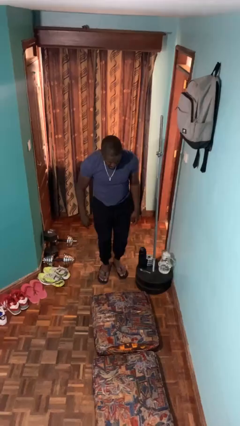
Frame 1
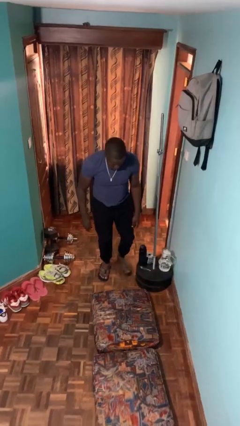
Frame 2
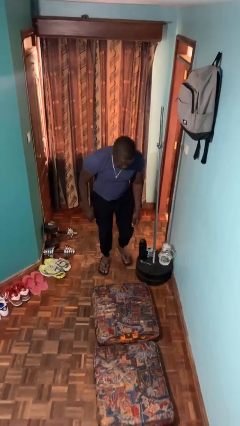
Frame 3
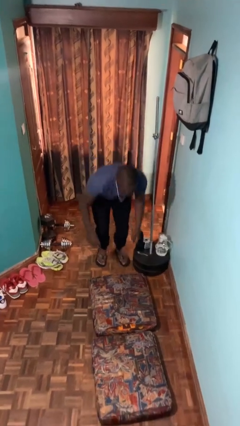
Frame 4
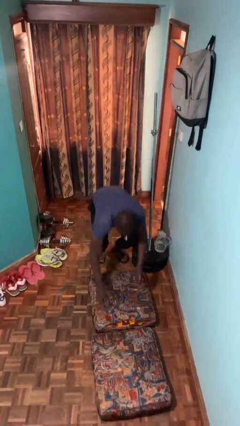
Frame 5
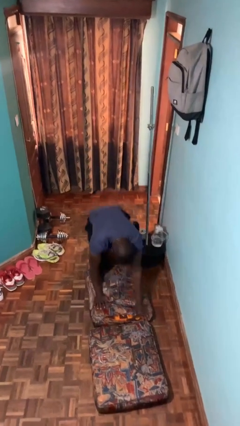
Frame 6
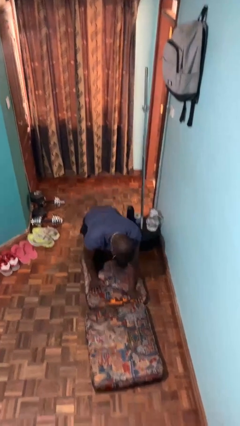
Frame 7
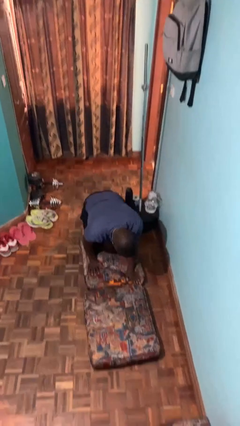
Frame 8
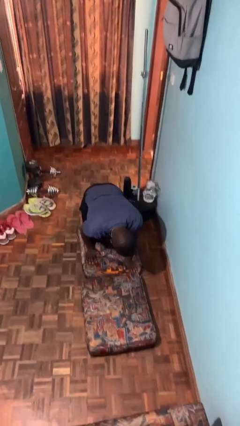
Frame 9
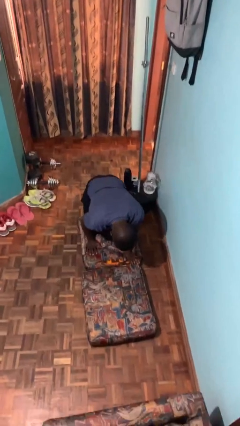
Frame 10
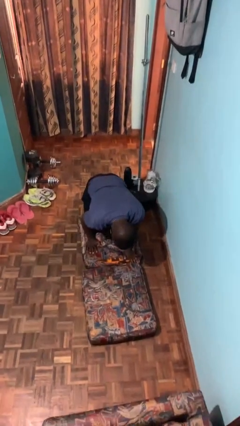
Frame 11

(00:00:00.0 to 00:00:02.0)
person trips on object on floor

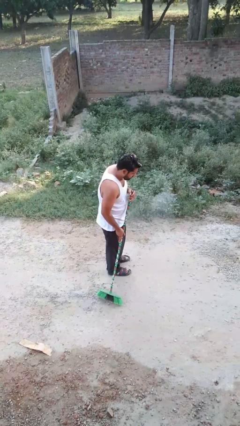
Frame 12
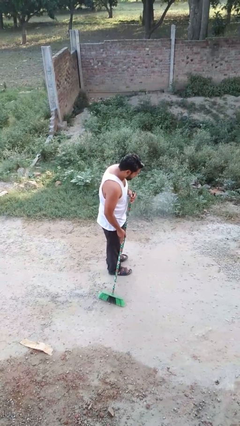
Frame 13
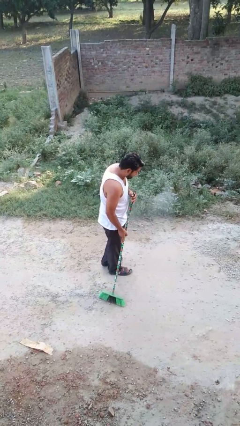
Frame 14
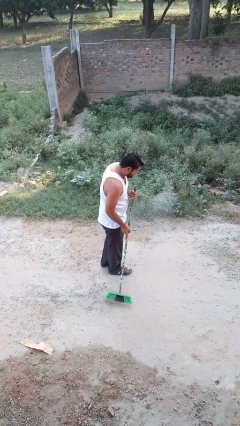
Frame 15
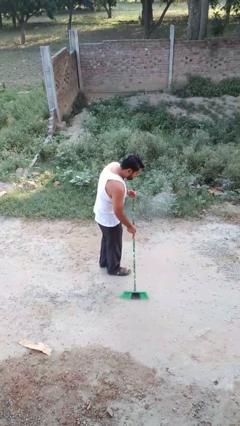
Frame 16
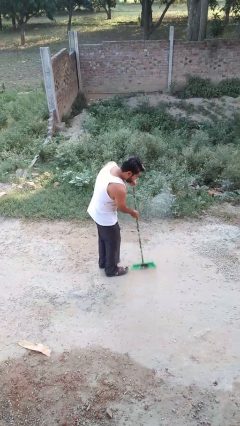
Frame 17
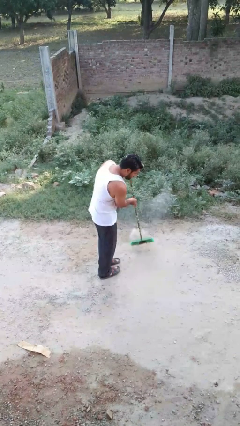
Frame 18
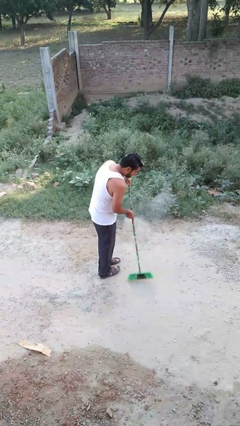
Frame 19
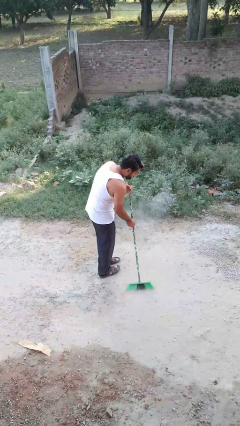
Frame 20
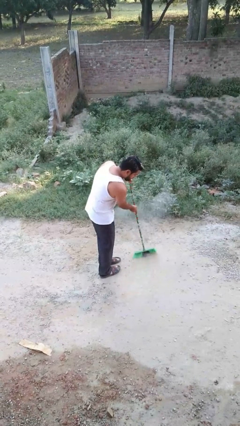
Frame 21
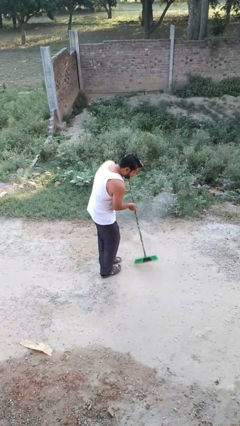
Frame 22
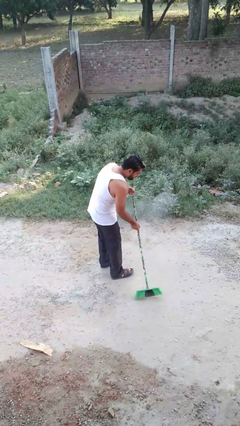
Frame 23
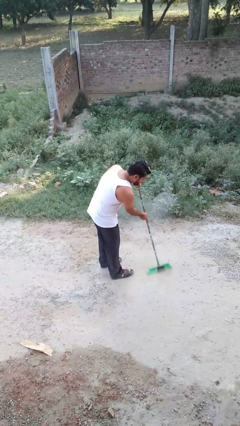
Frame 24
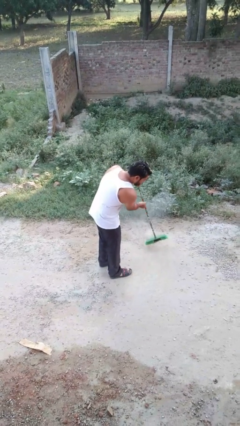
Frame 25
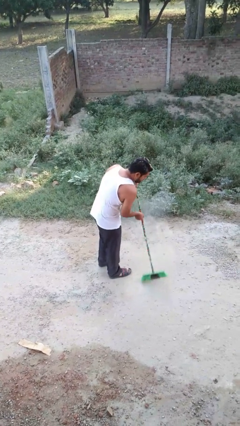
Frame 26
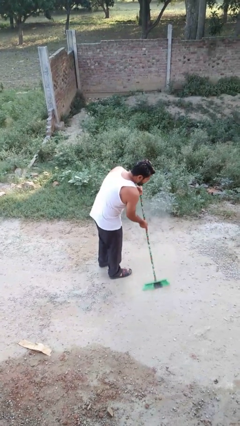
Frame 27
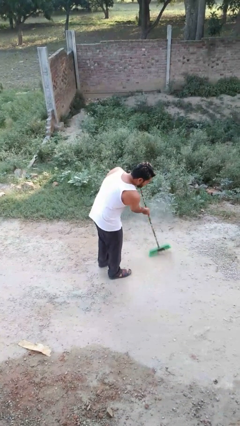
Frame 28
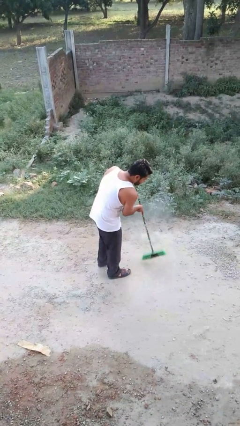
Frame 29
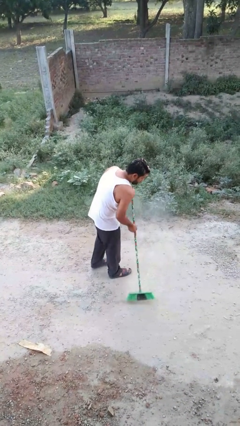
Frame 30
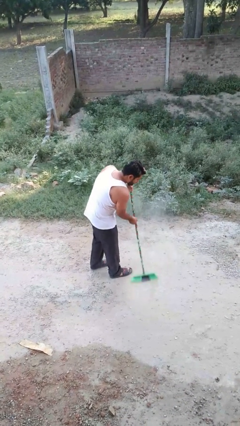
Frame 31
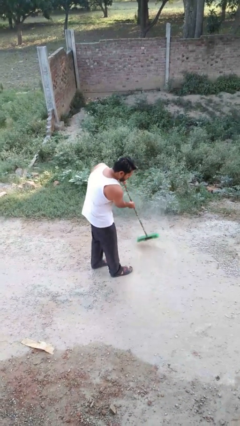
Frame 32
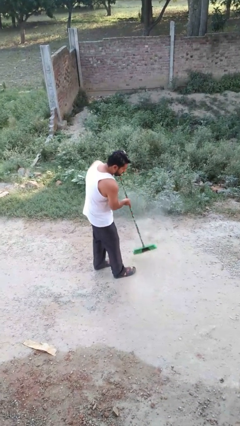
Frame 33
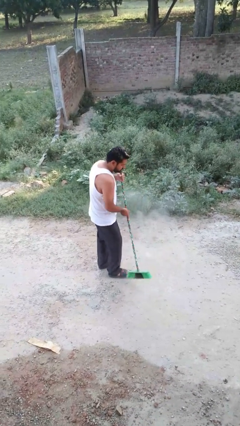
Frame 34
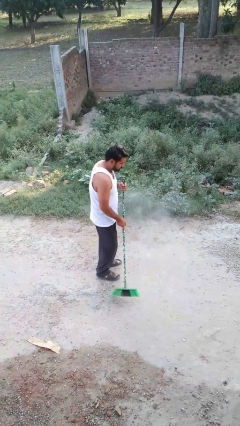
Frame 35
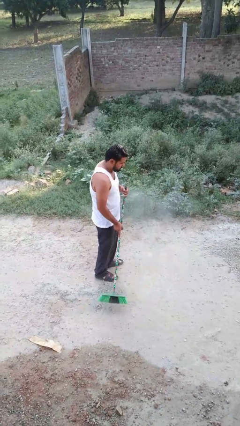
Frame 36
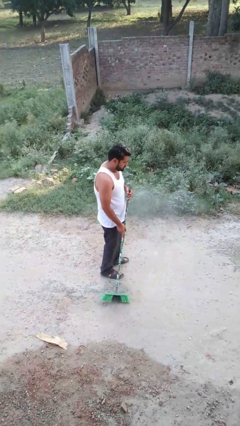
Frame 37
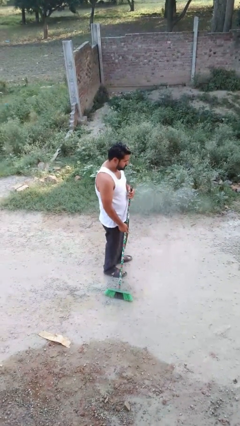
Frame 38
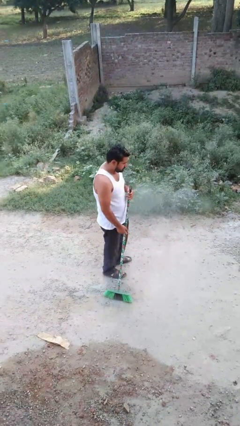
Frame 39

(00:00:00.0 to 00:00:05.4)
person sweeps floor

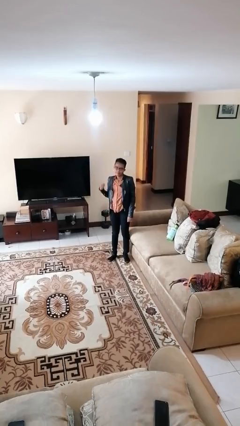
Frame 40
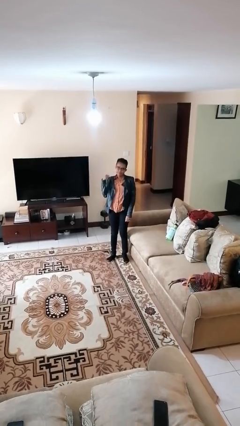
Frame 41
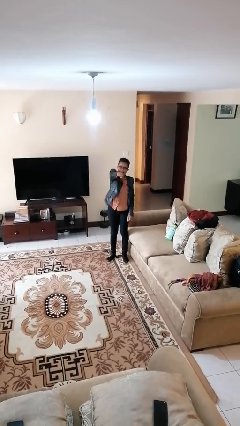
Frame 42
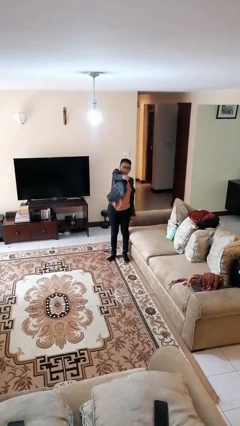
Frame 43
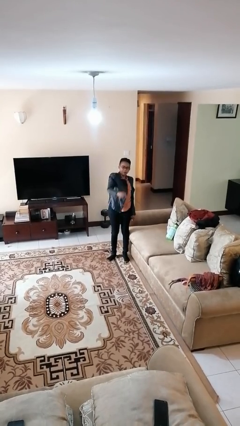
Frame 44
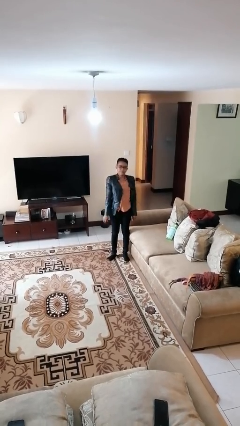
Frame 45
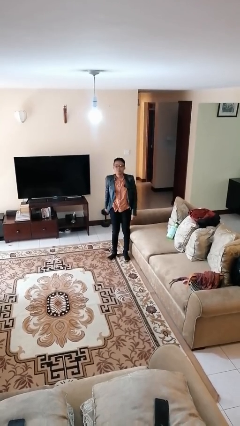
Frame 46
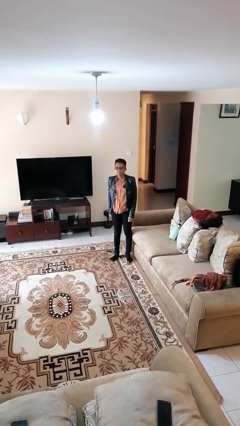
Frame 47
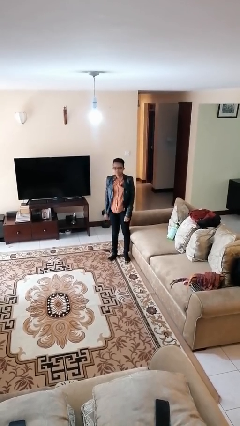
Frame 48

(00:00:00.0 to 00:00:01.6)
person punches

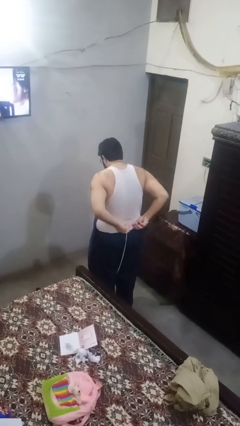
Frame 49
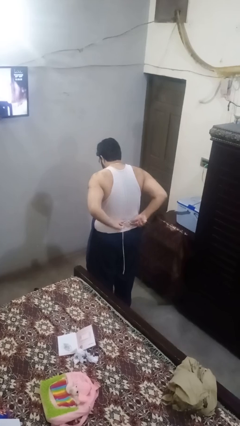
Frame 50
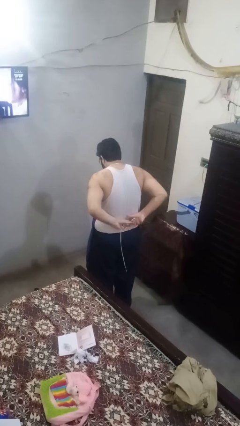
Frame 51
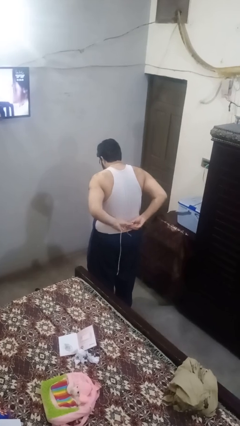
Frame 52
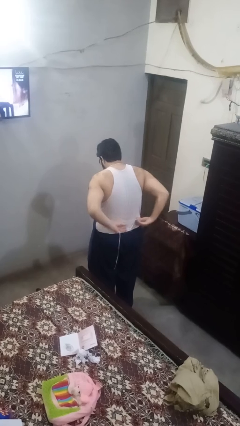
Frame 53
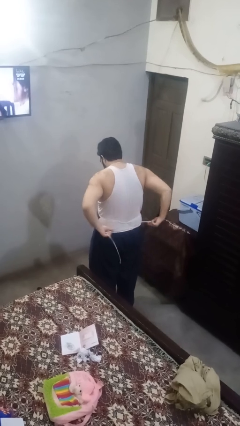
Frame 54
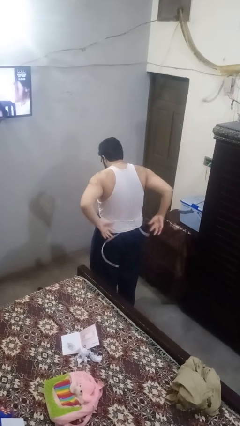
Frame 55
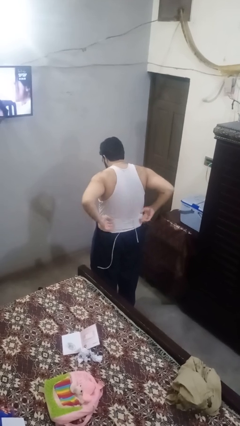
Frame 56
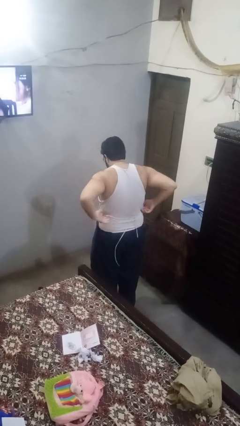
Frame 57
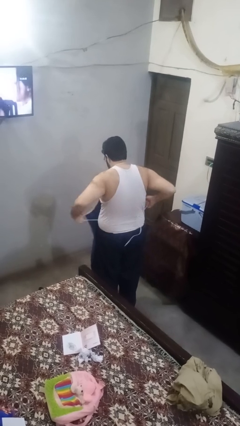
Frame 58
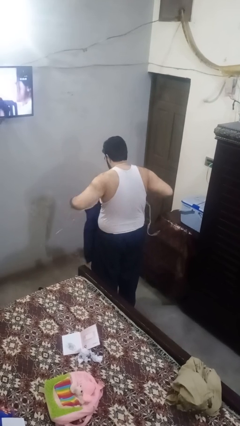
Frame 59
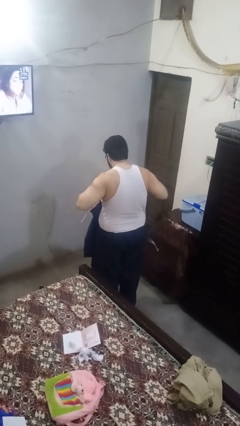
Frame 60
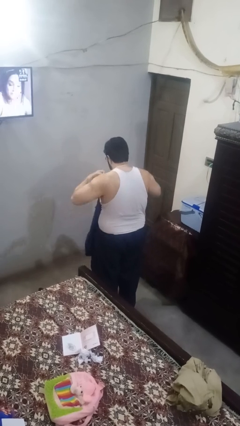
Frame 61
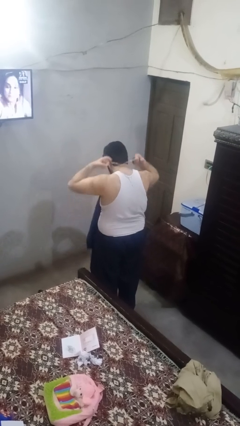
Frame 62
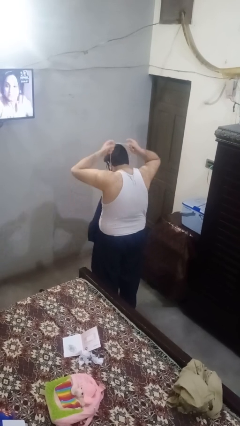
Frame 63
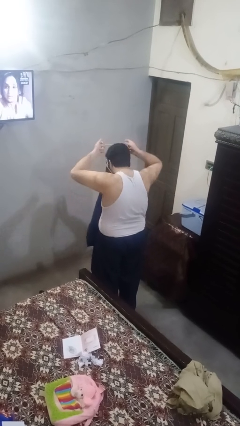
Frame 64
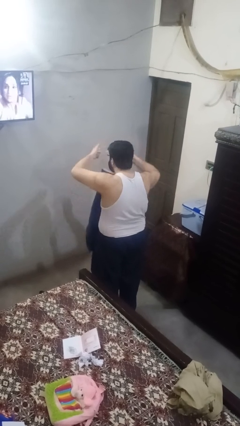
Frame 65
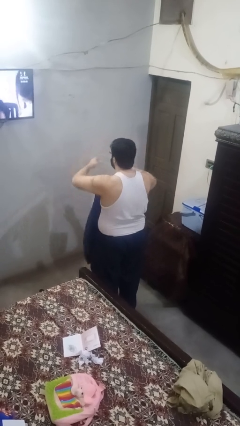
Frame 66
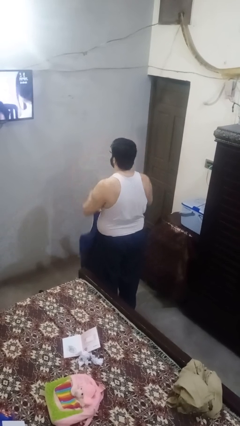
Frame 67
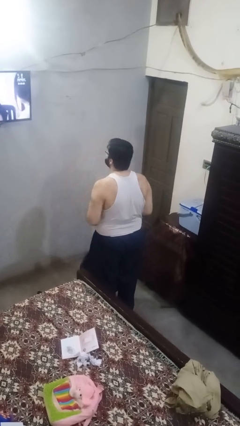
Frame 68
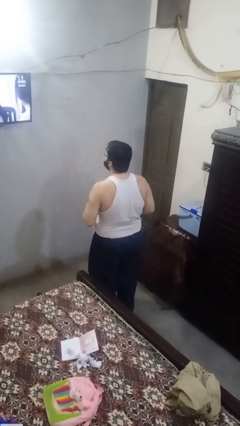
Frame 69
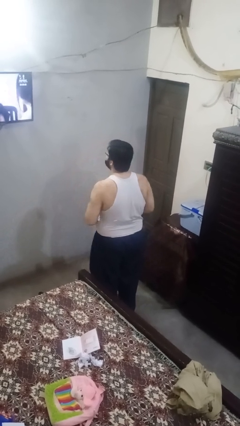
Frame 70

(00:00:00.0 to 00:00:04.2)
person takes off apron

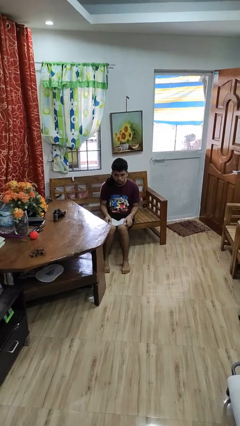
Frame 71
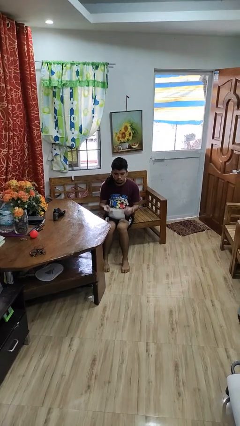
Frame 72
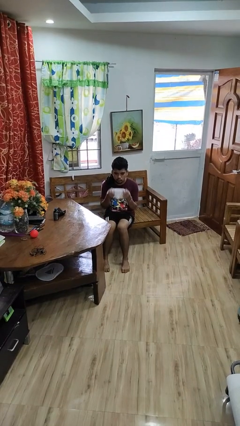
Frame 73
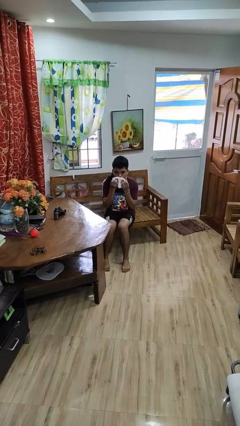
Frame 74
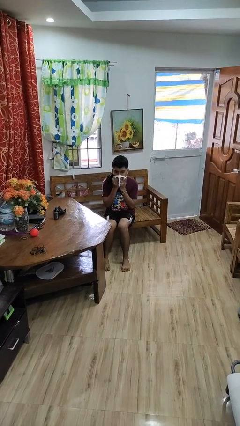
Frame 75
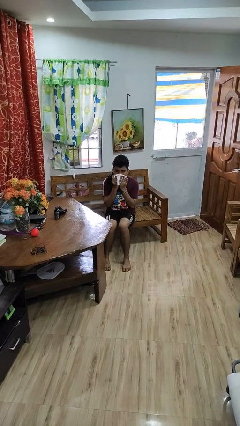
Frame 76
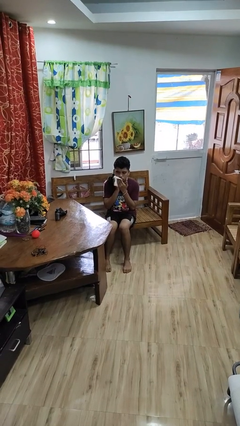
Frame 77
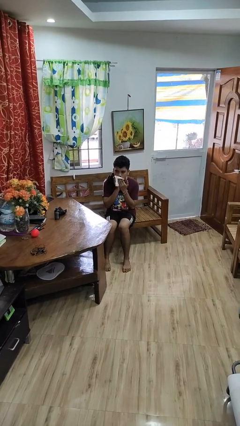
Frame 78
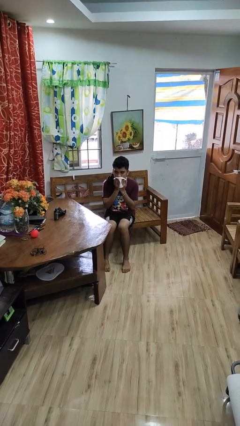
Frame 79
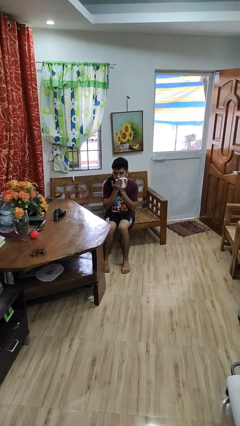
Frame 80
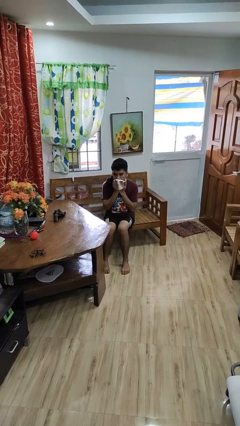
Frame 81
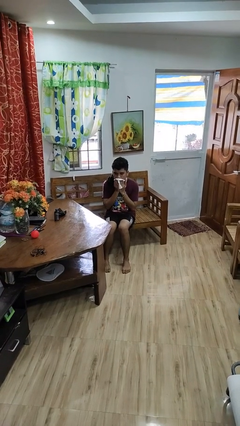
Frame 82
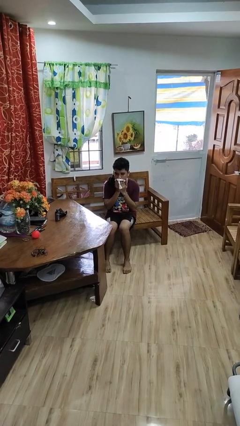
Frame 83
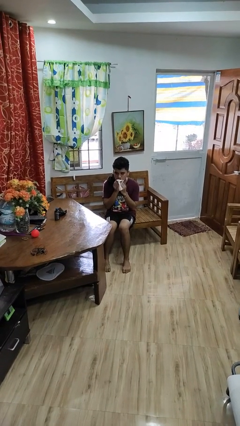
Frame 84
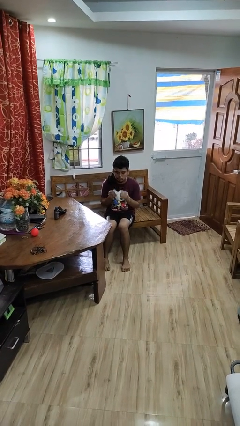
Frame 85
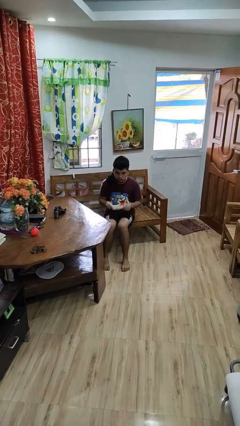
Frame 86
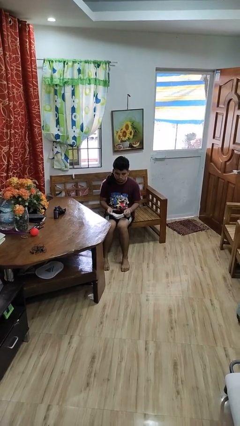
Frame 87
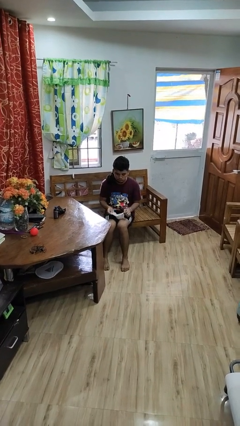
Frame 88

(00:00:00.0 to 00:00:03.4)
person wipes mouth with napkin

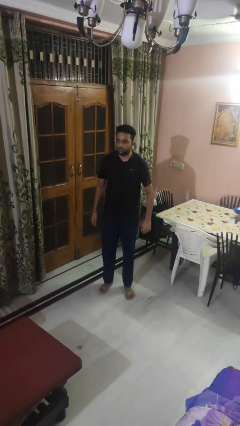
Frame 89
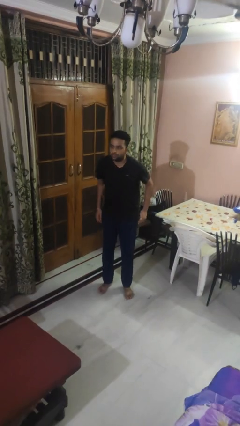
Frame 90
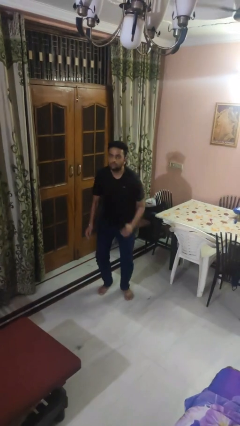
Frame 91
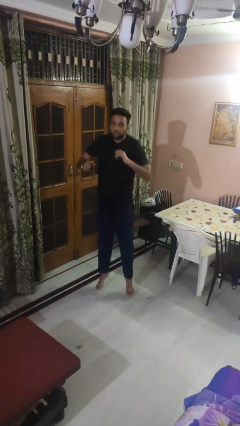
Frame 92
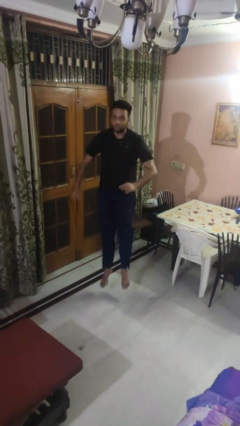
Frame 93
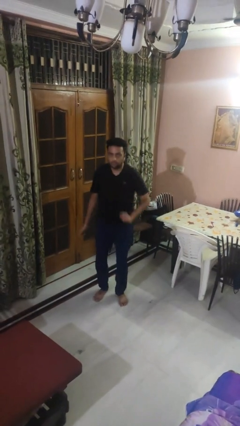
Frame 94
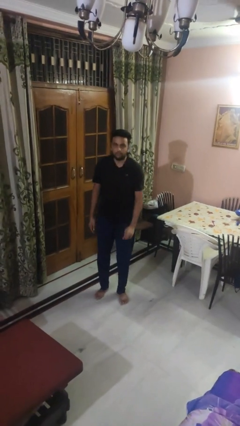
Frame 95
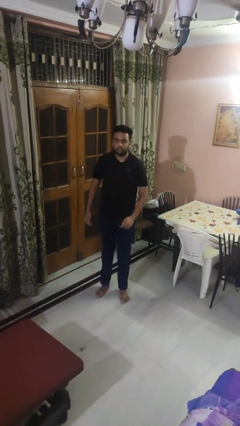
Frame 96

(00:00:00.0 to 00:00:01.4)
person jumps
